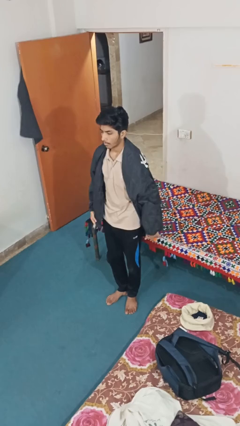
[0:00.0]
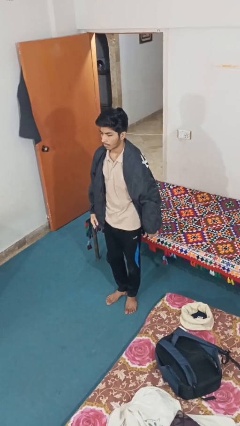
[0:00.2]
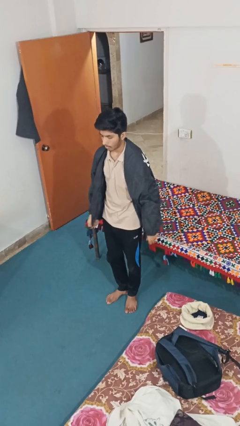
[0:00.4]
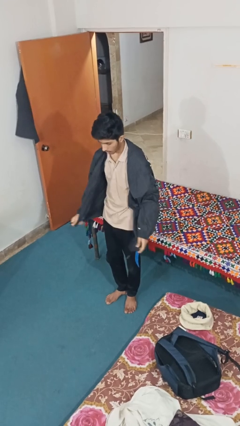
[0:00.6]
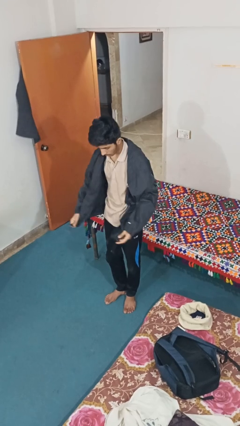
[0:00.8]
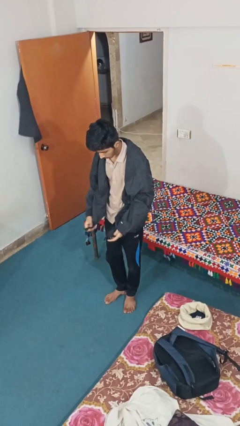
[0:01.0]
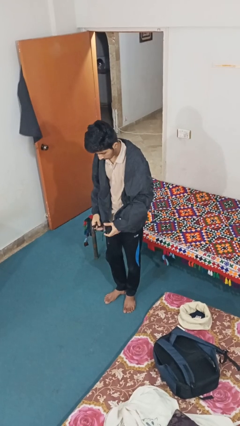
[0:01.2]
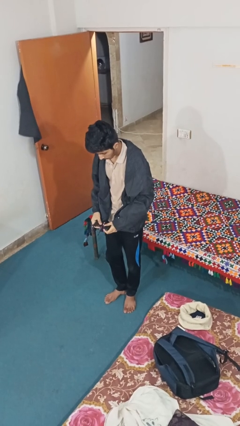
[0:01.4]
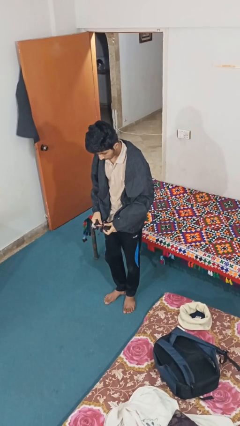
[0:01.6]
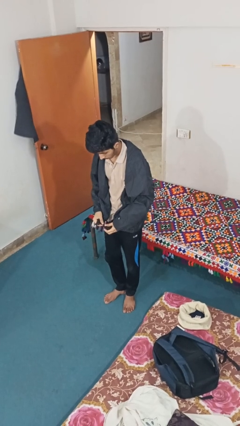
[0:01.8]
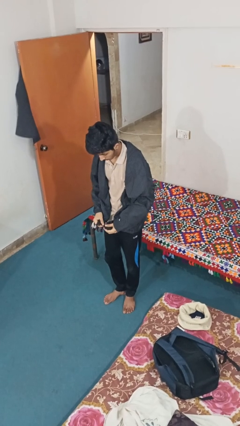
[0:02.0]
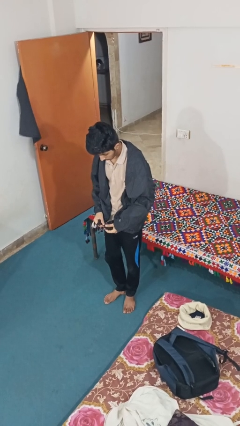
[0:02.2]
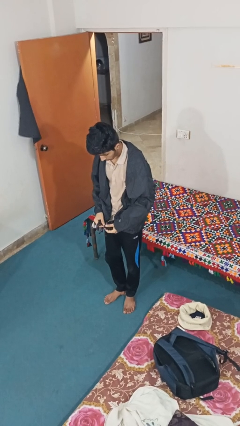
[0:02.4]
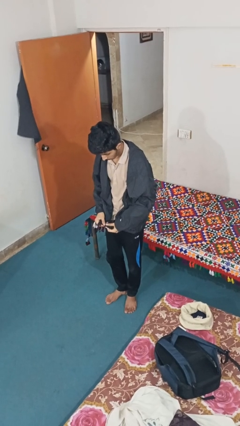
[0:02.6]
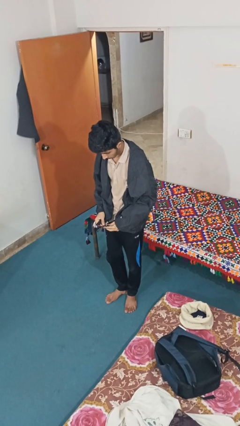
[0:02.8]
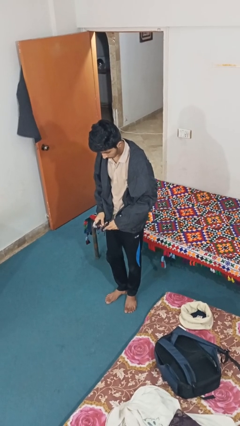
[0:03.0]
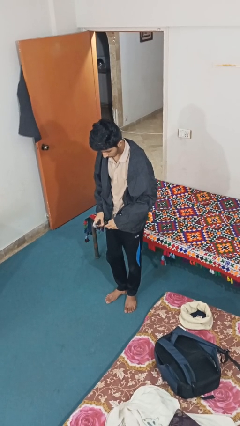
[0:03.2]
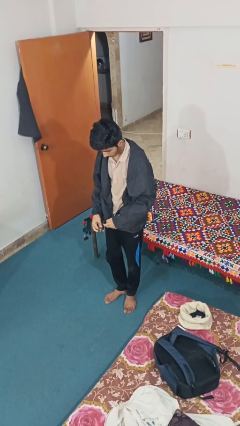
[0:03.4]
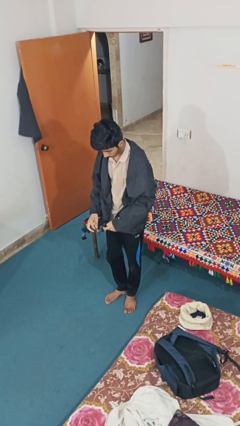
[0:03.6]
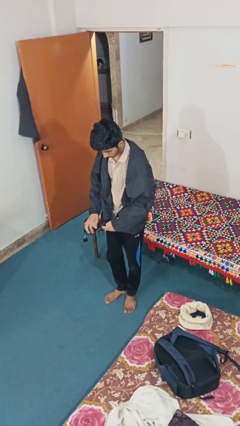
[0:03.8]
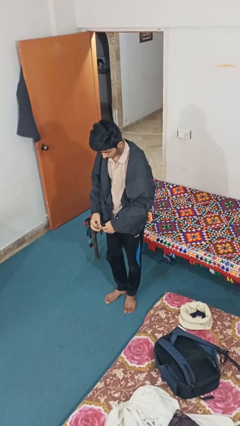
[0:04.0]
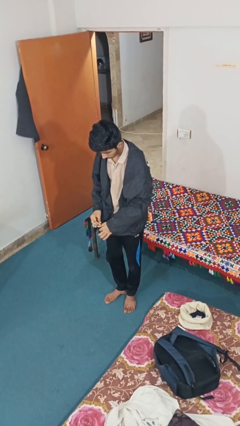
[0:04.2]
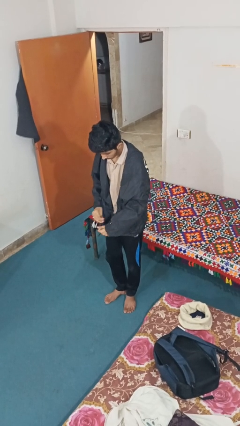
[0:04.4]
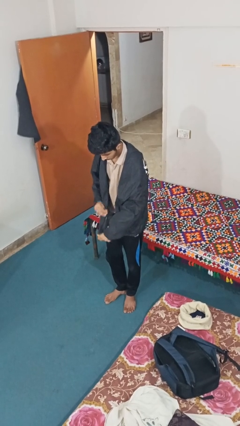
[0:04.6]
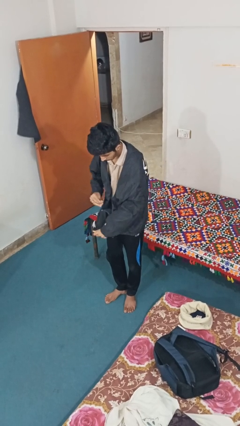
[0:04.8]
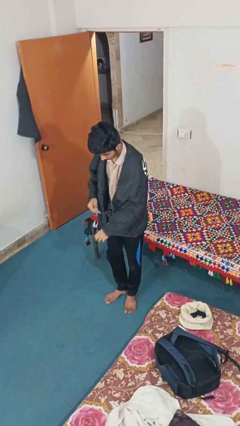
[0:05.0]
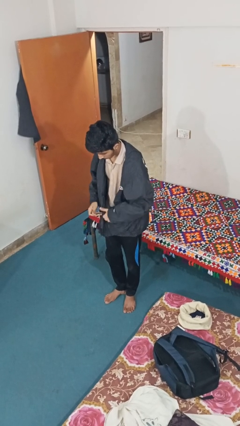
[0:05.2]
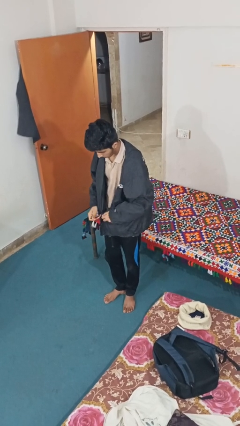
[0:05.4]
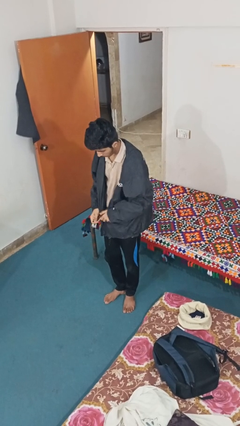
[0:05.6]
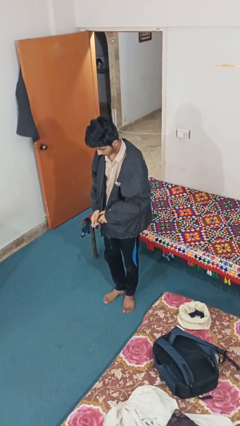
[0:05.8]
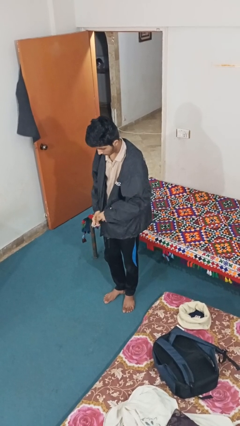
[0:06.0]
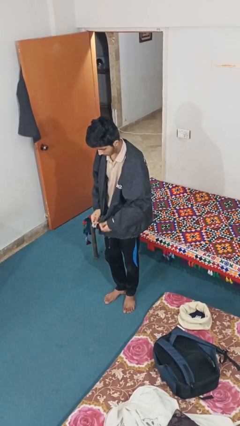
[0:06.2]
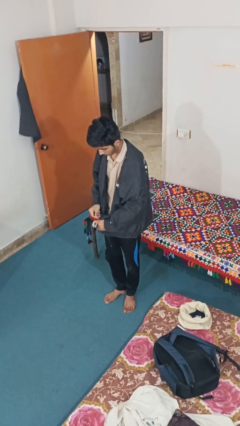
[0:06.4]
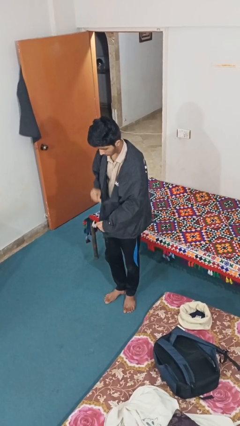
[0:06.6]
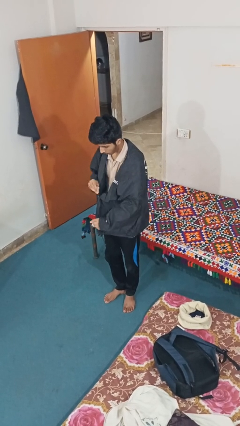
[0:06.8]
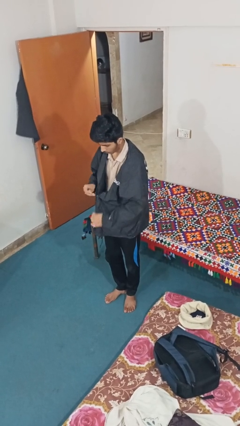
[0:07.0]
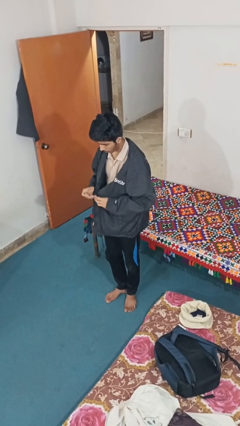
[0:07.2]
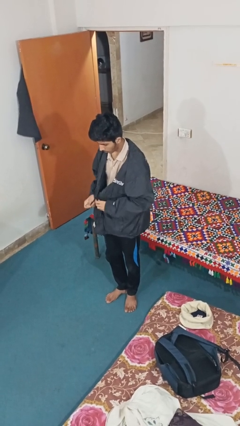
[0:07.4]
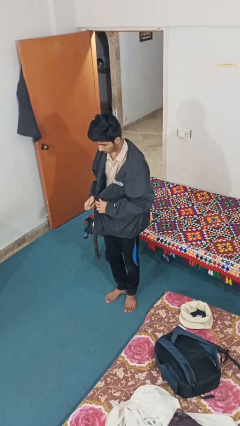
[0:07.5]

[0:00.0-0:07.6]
person zips up jacket

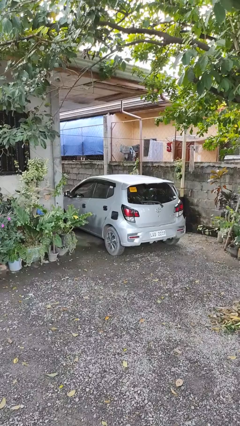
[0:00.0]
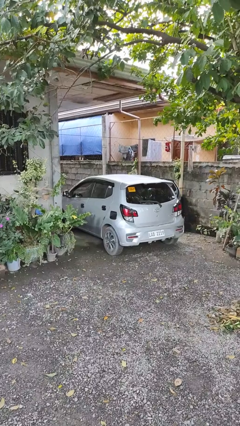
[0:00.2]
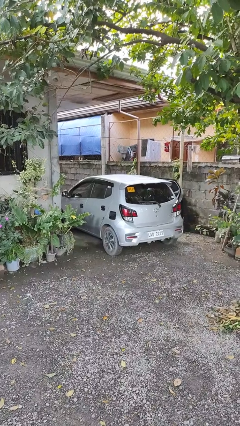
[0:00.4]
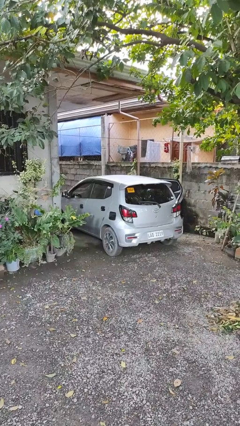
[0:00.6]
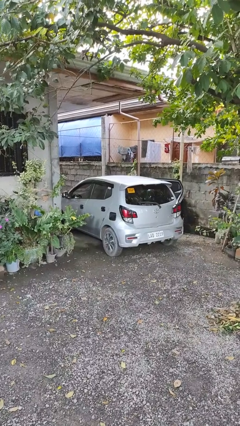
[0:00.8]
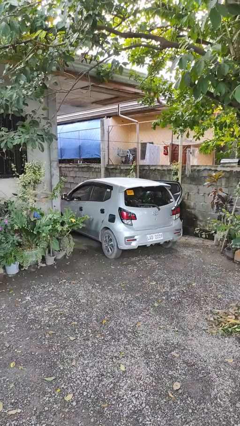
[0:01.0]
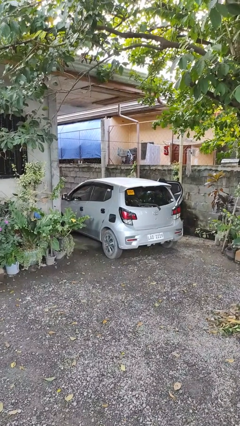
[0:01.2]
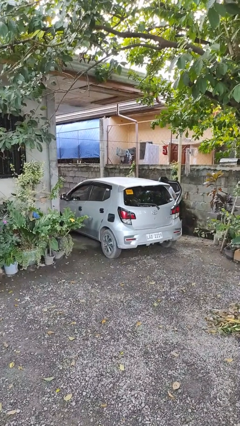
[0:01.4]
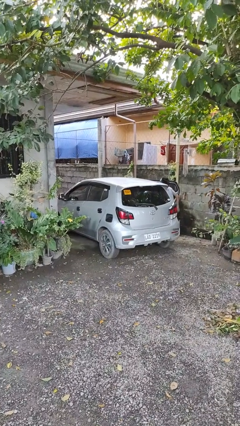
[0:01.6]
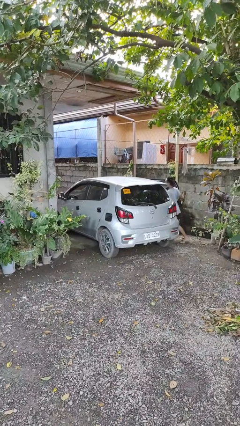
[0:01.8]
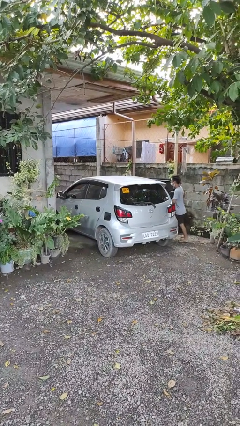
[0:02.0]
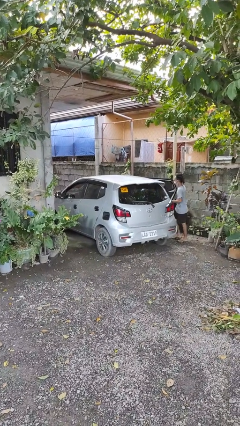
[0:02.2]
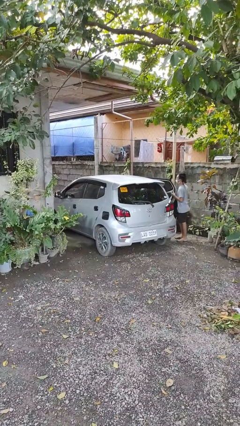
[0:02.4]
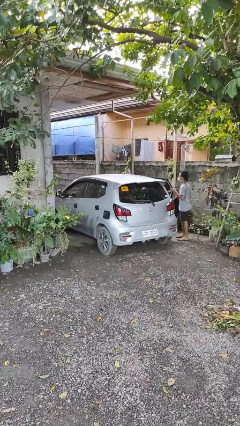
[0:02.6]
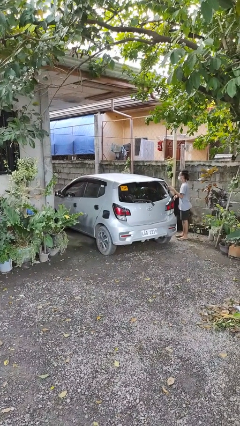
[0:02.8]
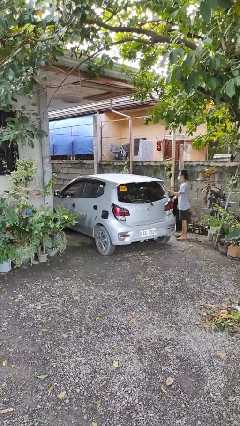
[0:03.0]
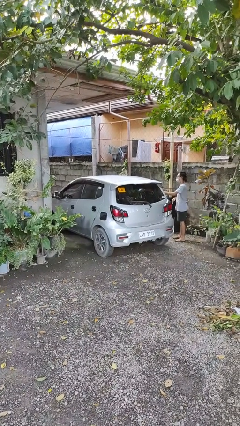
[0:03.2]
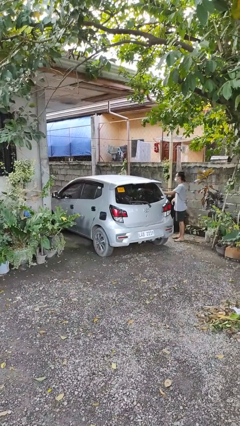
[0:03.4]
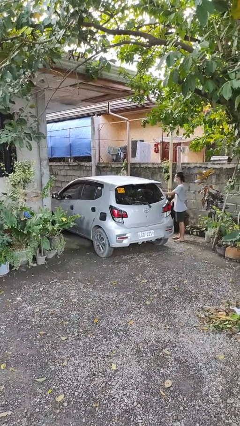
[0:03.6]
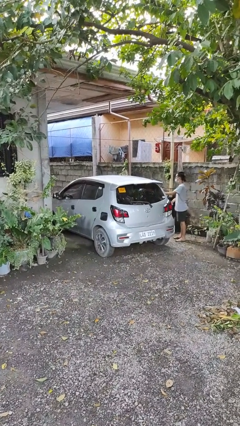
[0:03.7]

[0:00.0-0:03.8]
car drops off person

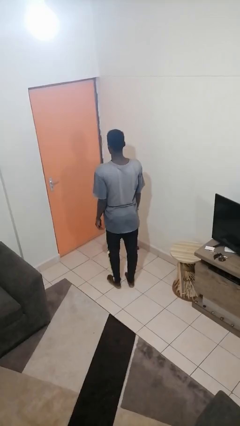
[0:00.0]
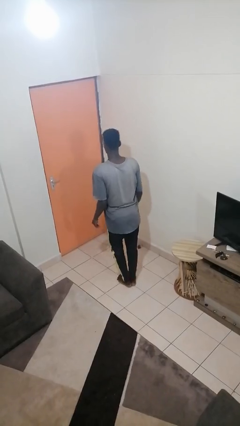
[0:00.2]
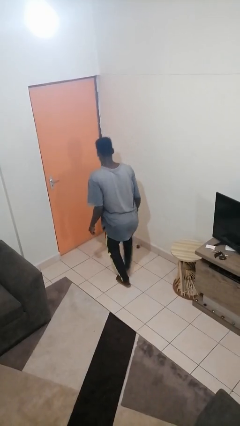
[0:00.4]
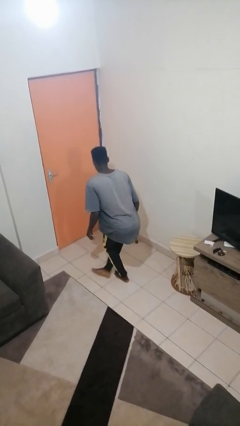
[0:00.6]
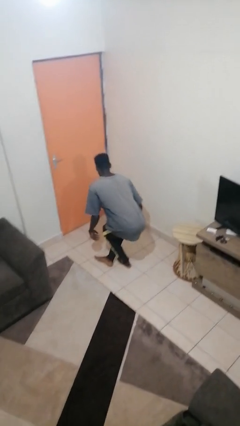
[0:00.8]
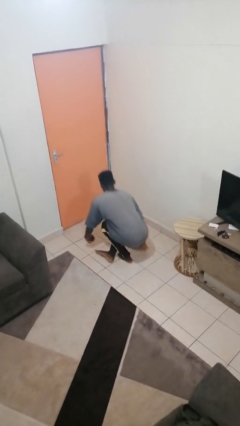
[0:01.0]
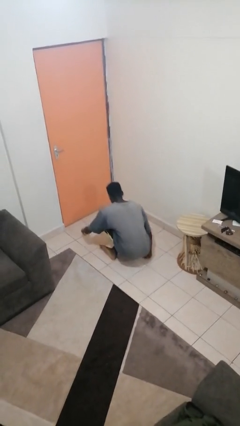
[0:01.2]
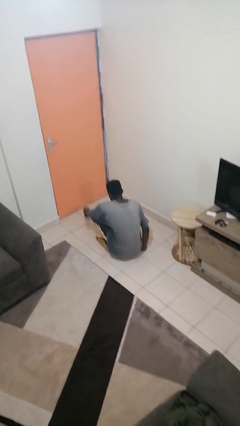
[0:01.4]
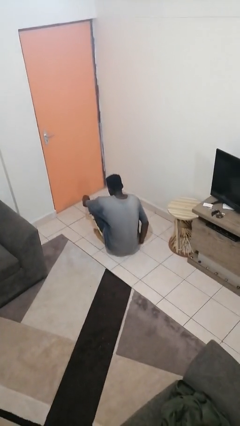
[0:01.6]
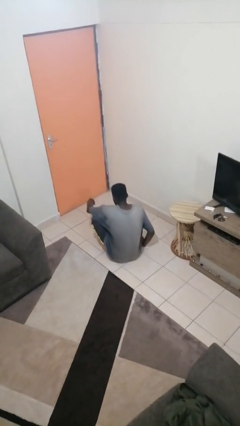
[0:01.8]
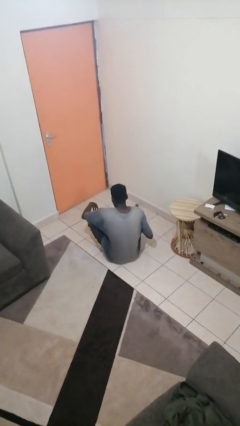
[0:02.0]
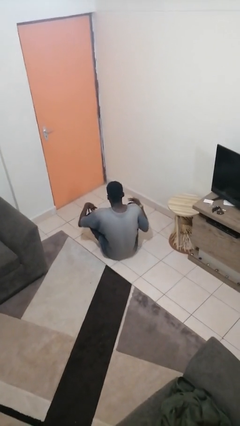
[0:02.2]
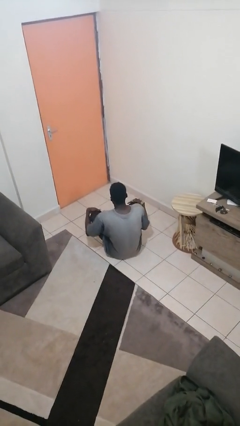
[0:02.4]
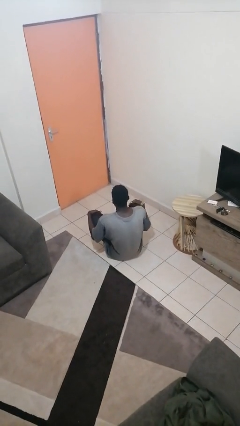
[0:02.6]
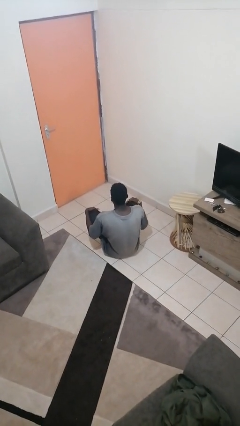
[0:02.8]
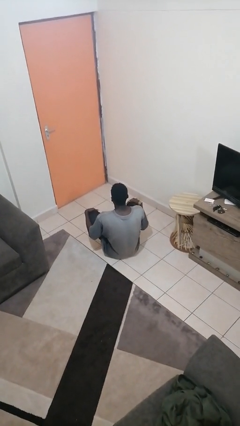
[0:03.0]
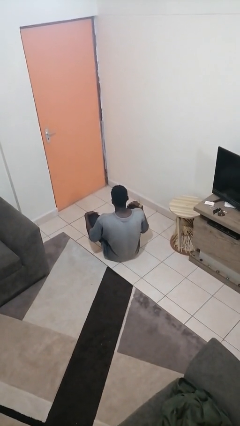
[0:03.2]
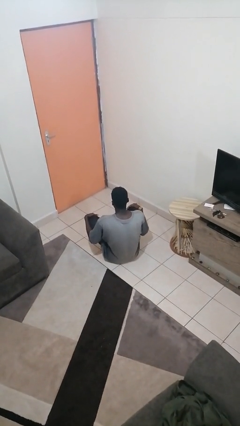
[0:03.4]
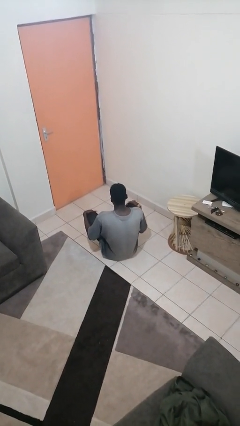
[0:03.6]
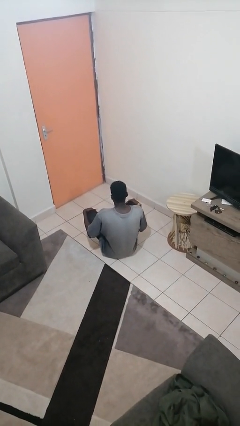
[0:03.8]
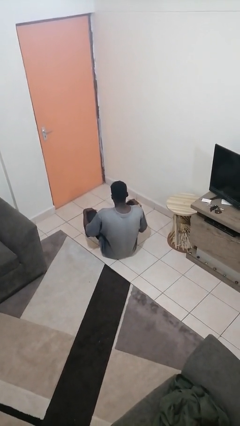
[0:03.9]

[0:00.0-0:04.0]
person sits crisscross

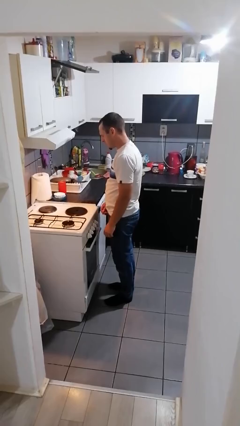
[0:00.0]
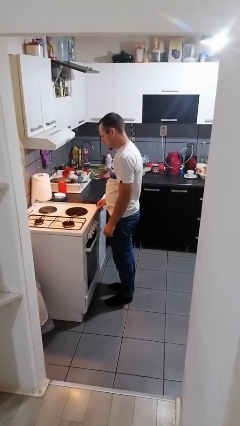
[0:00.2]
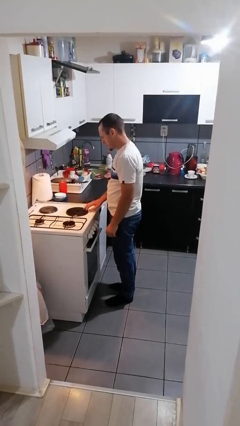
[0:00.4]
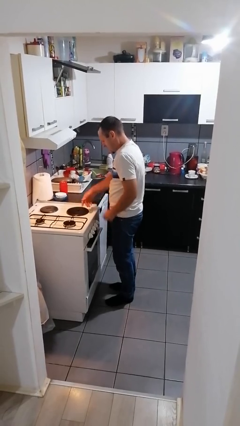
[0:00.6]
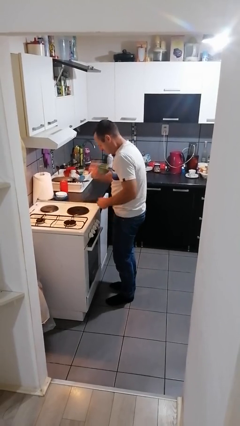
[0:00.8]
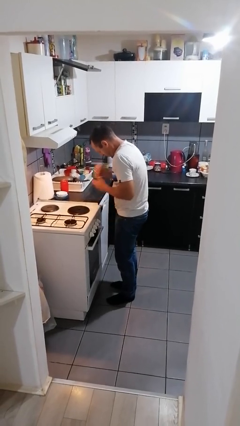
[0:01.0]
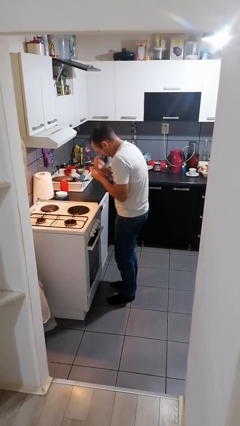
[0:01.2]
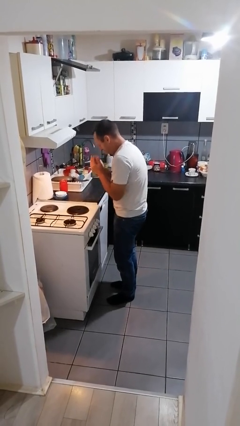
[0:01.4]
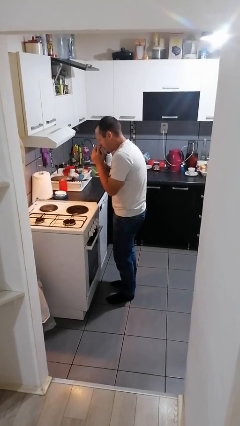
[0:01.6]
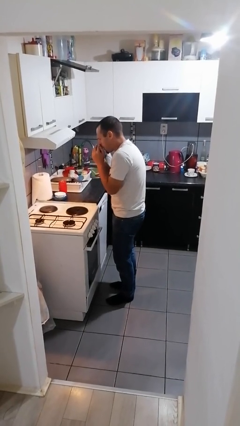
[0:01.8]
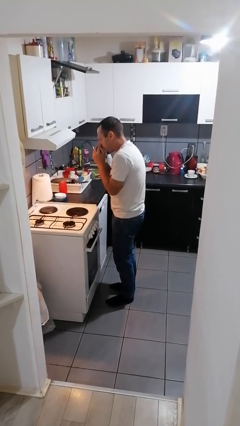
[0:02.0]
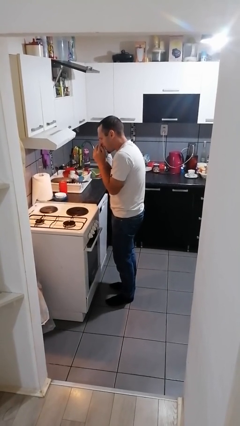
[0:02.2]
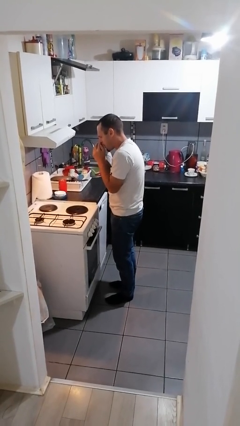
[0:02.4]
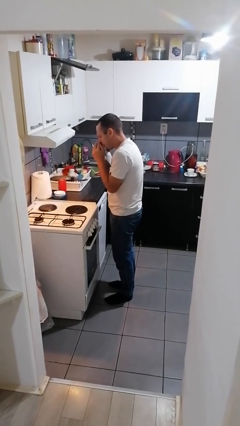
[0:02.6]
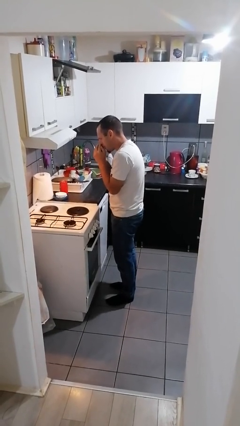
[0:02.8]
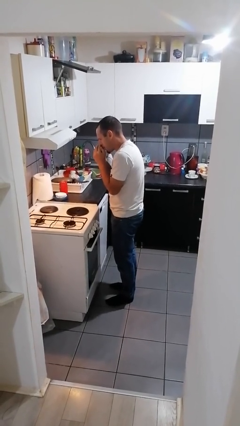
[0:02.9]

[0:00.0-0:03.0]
person burns hand
